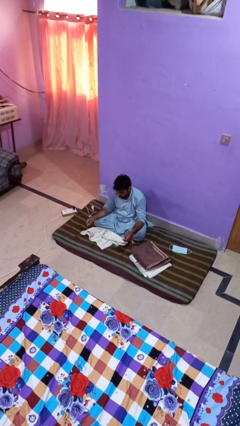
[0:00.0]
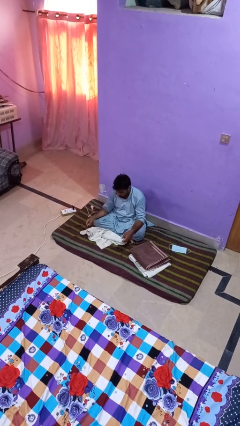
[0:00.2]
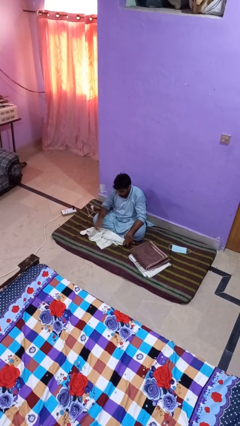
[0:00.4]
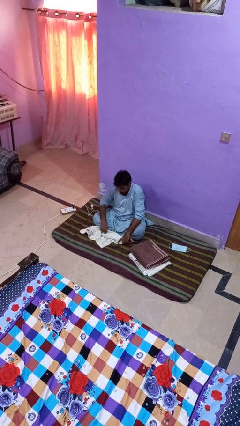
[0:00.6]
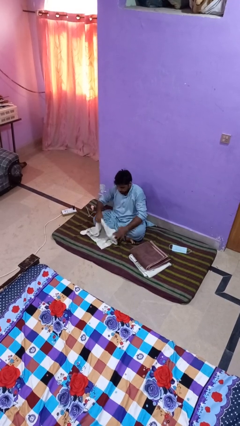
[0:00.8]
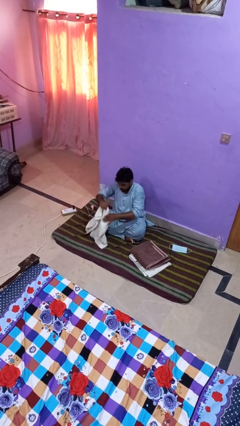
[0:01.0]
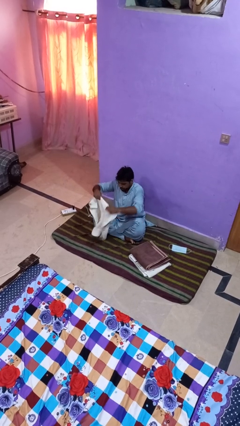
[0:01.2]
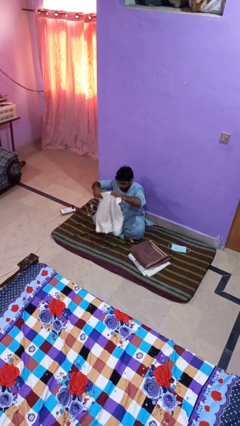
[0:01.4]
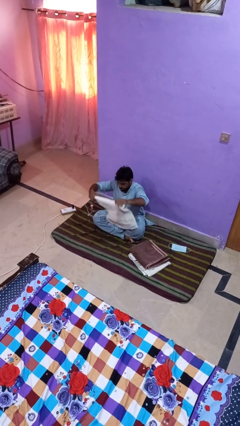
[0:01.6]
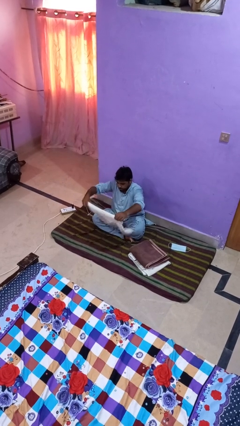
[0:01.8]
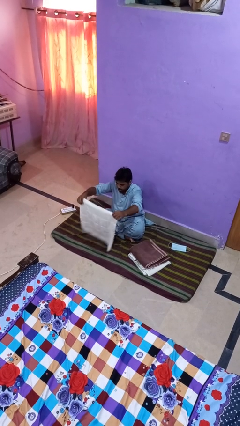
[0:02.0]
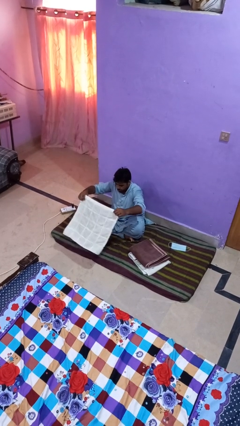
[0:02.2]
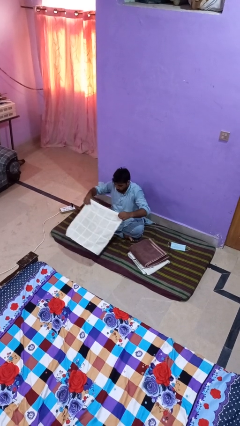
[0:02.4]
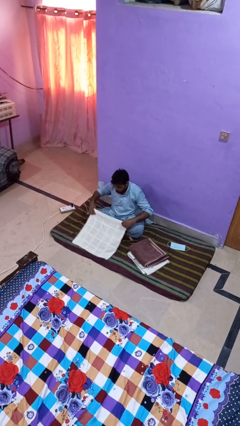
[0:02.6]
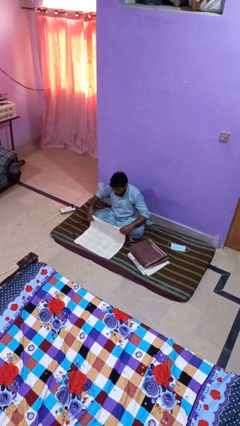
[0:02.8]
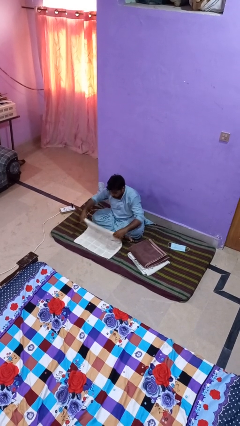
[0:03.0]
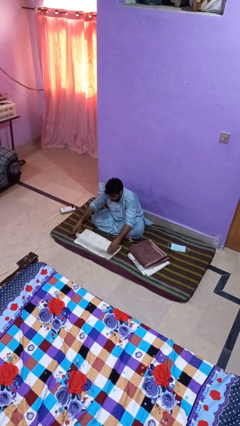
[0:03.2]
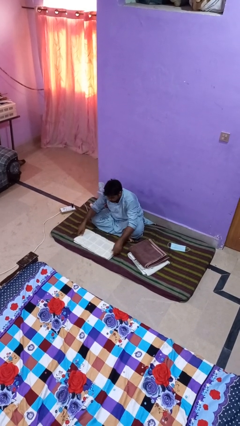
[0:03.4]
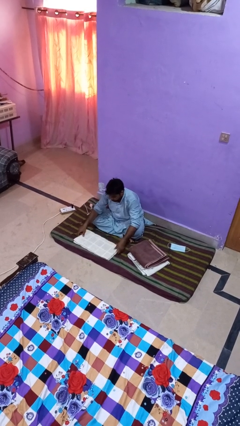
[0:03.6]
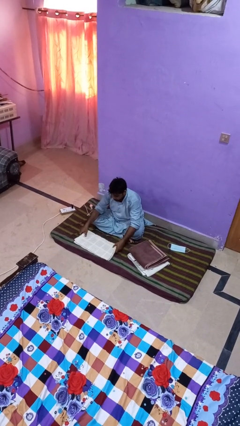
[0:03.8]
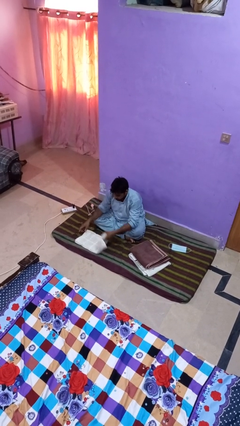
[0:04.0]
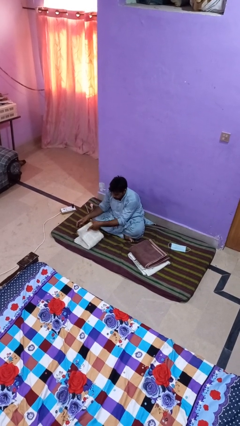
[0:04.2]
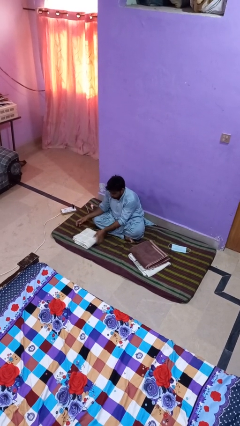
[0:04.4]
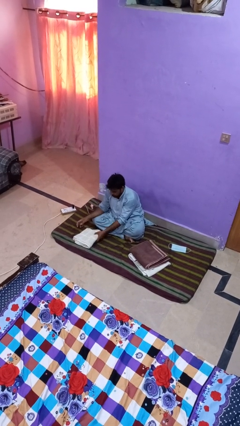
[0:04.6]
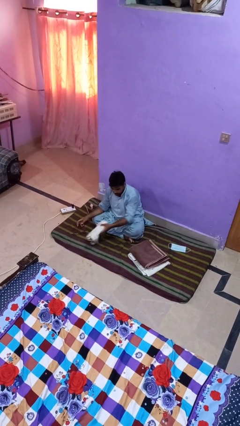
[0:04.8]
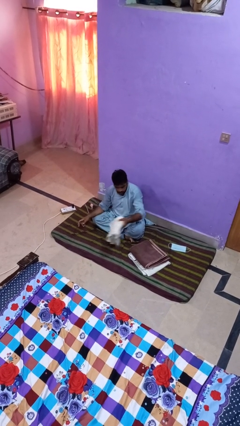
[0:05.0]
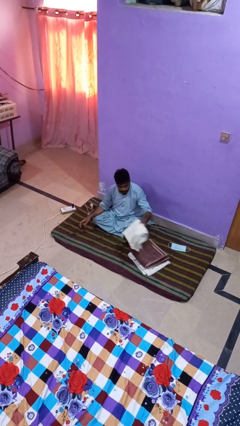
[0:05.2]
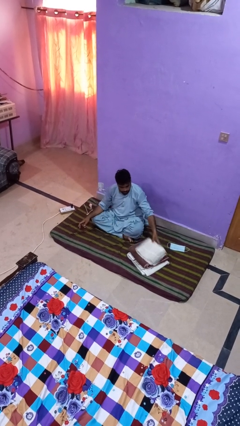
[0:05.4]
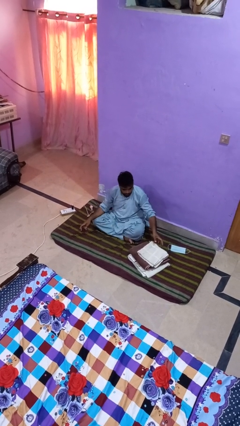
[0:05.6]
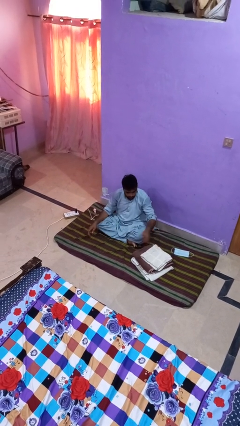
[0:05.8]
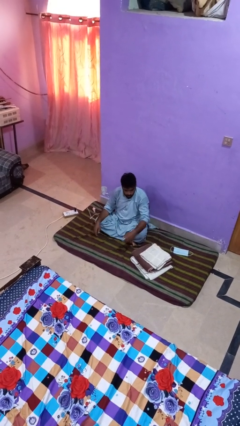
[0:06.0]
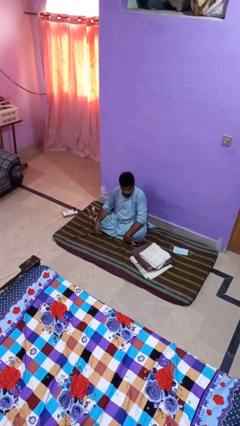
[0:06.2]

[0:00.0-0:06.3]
person folds towel

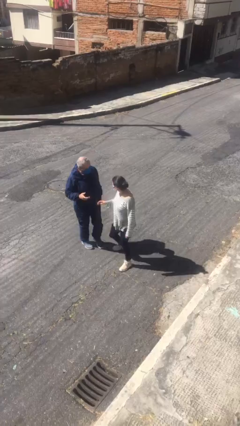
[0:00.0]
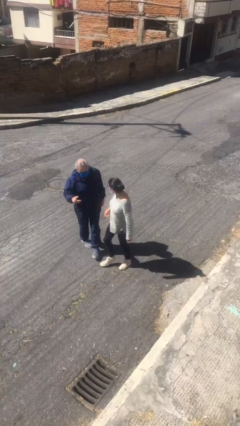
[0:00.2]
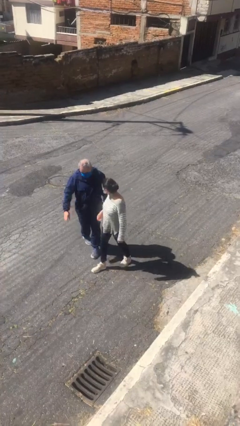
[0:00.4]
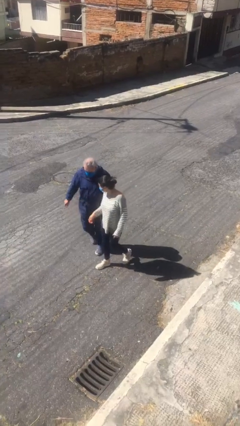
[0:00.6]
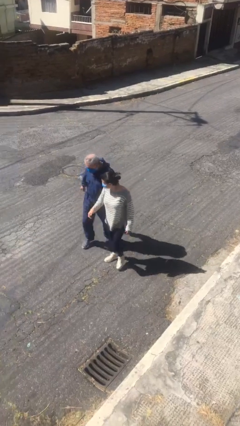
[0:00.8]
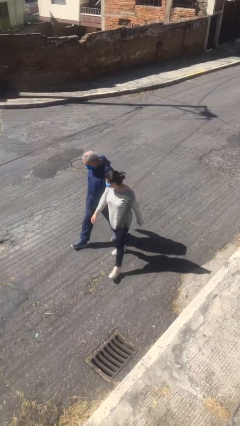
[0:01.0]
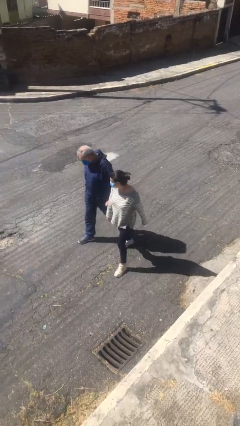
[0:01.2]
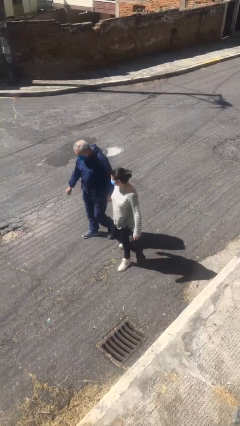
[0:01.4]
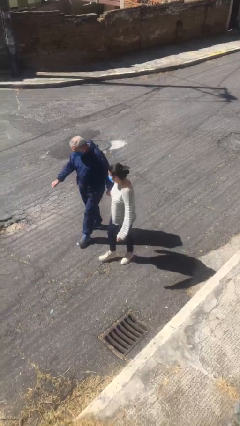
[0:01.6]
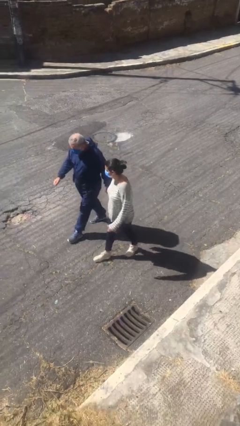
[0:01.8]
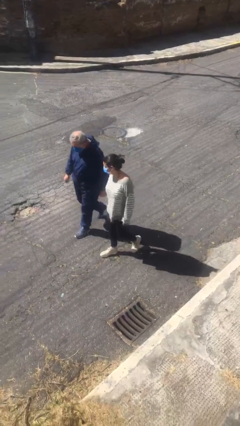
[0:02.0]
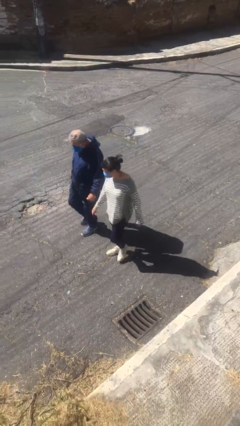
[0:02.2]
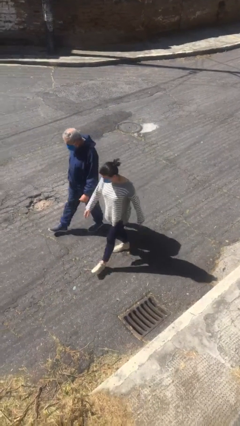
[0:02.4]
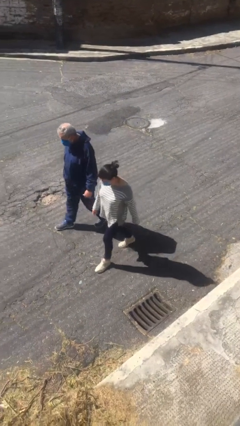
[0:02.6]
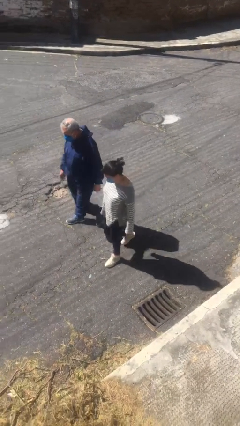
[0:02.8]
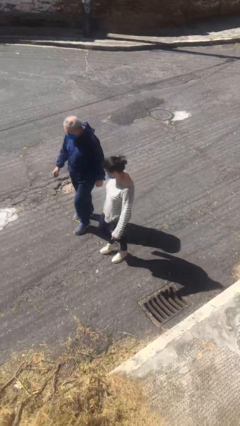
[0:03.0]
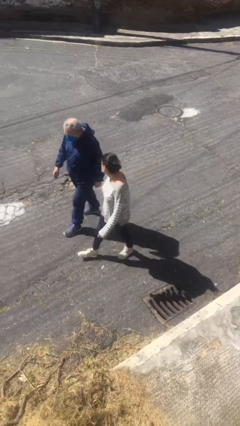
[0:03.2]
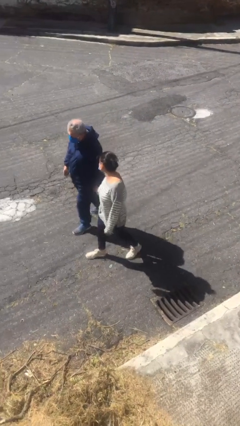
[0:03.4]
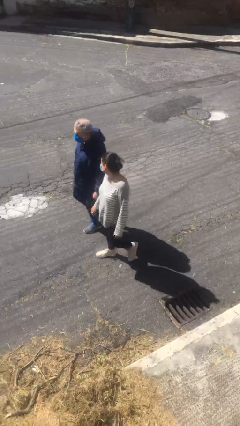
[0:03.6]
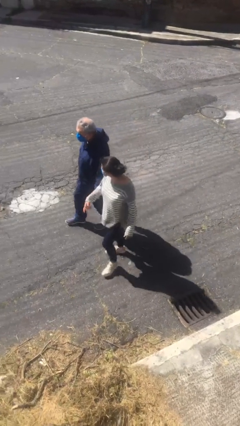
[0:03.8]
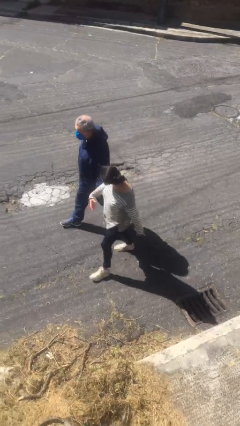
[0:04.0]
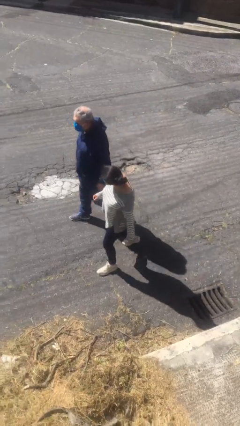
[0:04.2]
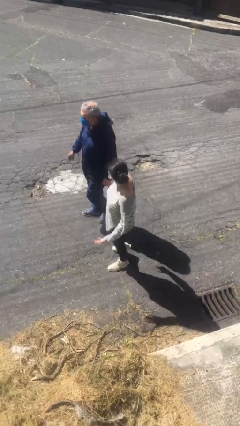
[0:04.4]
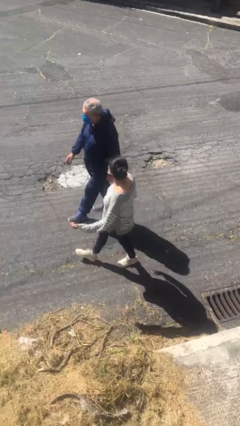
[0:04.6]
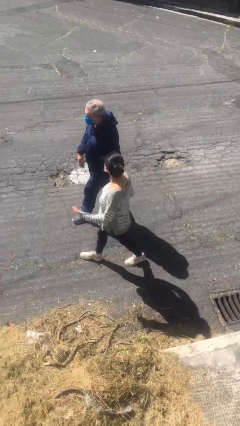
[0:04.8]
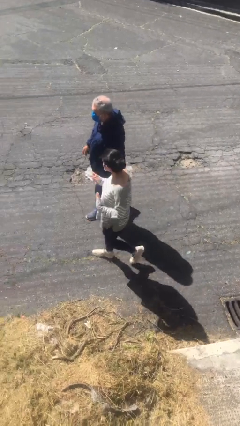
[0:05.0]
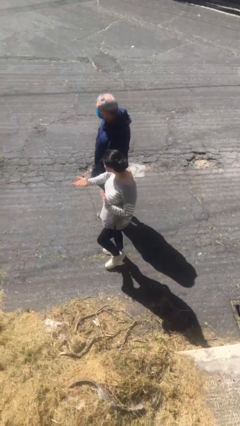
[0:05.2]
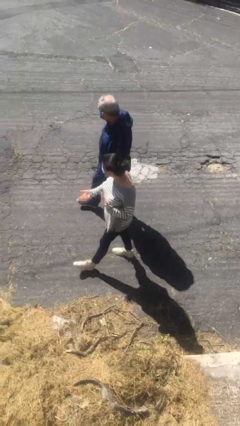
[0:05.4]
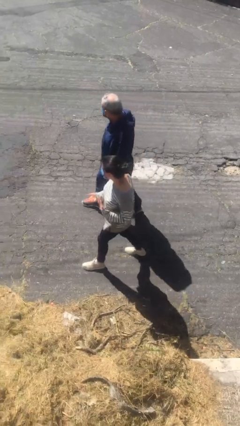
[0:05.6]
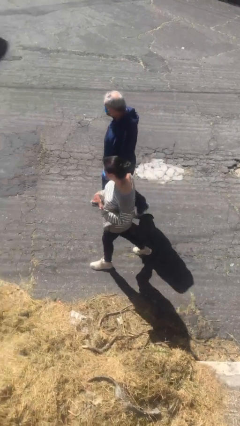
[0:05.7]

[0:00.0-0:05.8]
person talks to person

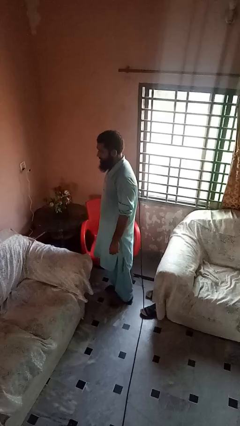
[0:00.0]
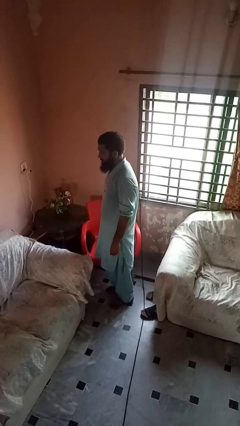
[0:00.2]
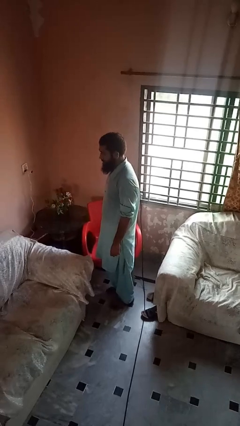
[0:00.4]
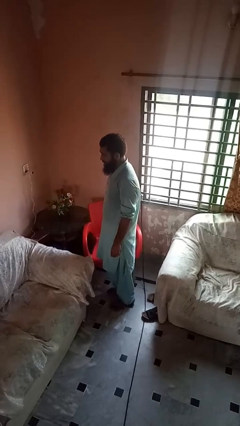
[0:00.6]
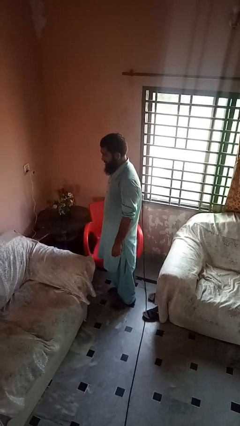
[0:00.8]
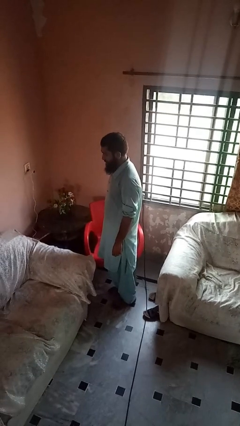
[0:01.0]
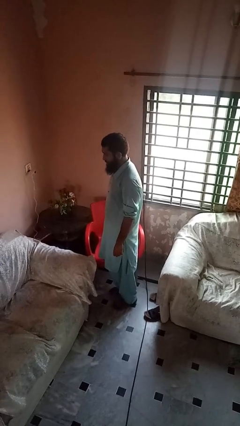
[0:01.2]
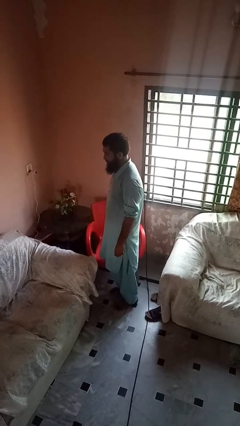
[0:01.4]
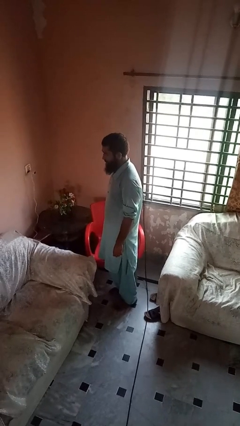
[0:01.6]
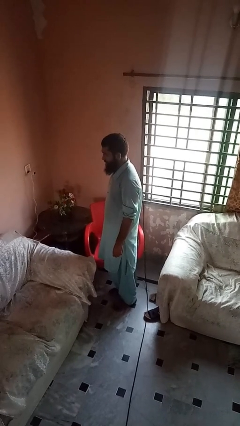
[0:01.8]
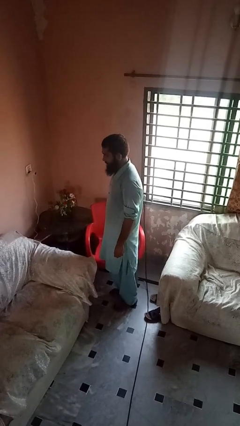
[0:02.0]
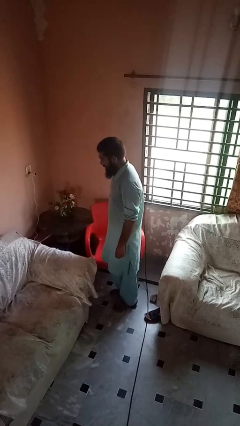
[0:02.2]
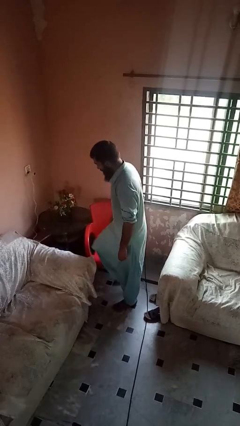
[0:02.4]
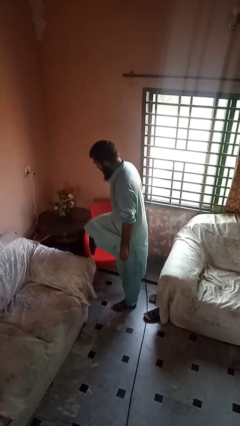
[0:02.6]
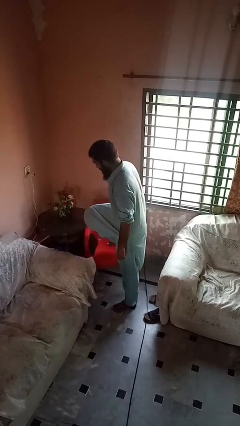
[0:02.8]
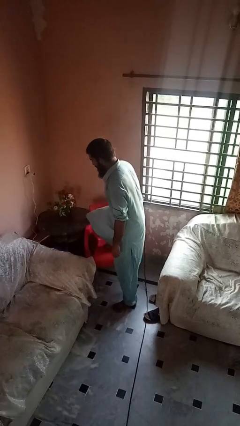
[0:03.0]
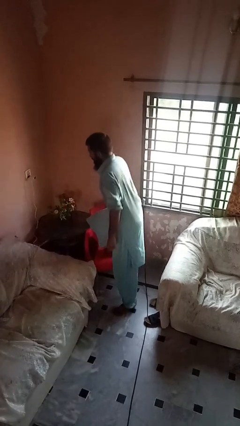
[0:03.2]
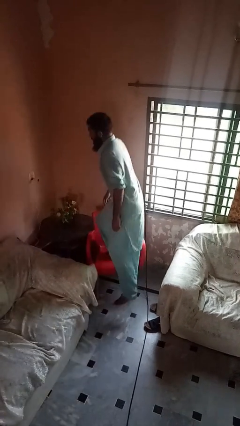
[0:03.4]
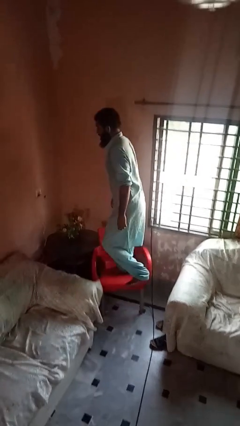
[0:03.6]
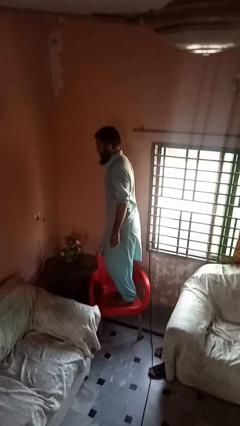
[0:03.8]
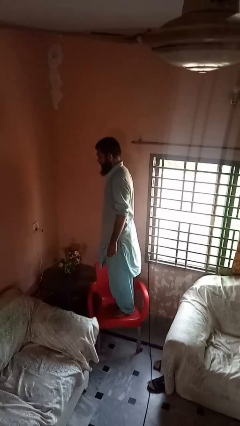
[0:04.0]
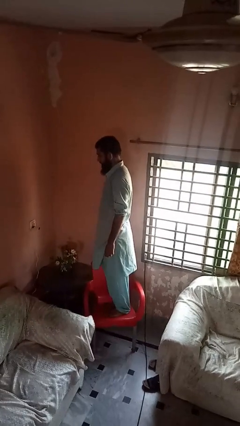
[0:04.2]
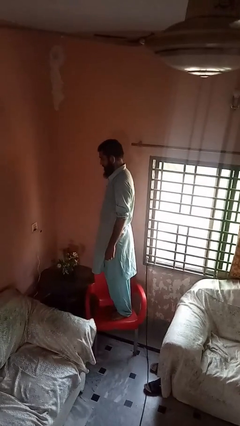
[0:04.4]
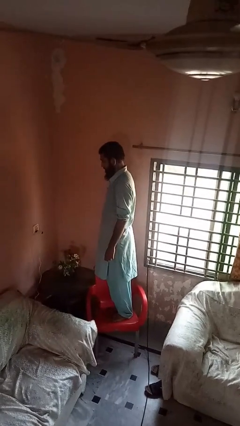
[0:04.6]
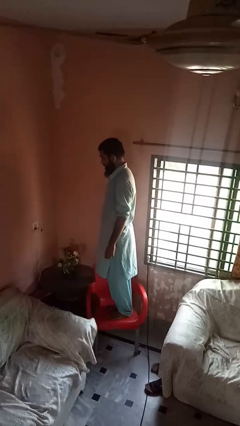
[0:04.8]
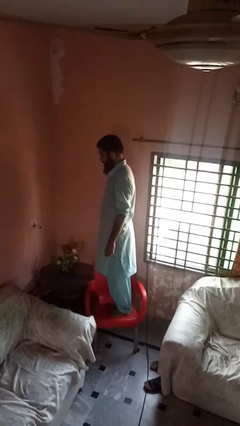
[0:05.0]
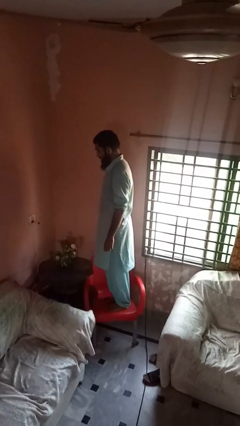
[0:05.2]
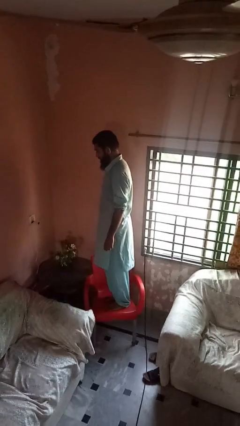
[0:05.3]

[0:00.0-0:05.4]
person climbs on chair

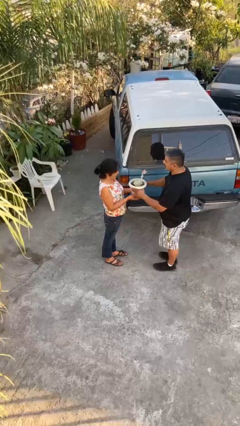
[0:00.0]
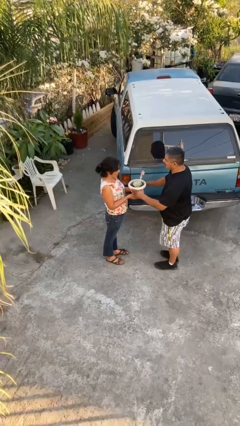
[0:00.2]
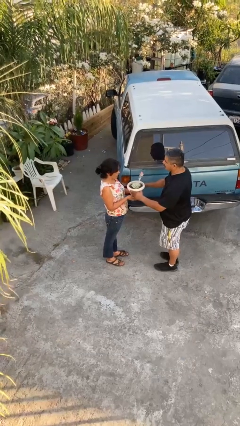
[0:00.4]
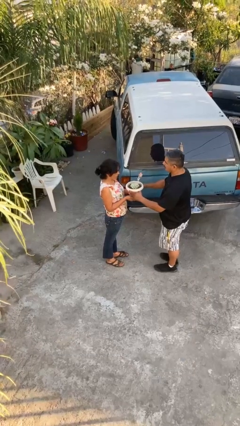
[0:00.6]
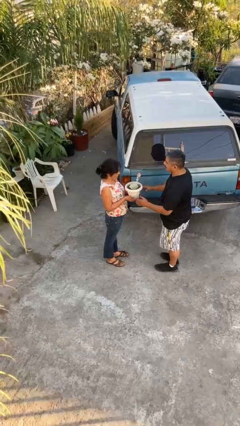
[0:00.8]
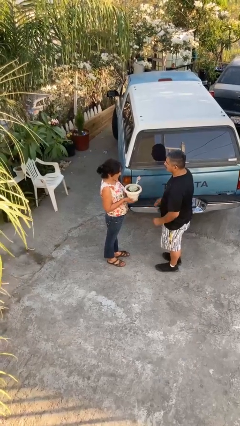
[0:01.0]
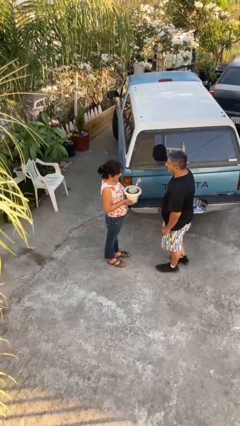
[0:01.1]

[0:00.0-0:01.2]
person transfers object to person
